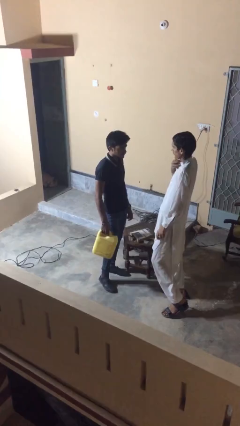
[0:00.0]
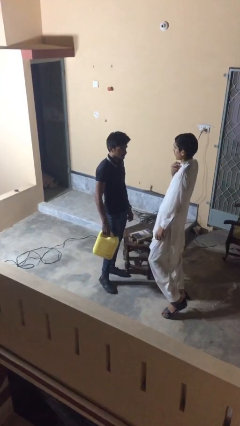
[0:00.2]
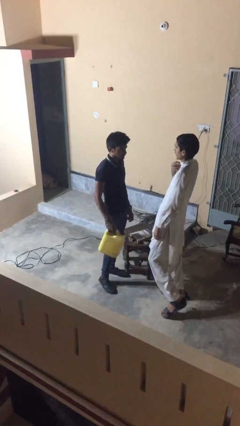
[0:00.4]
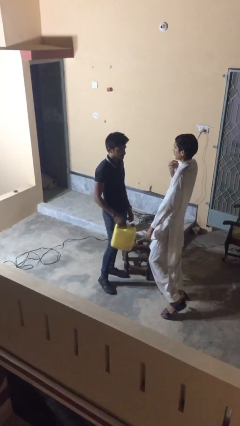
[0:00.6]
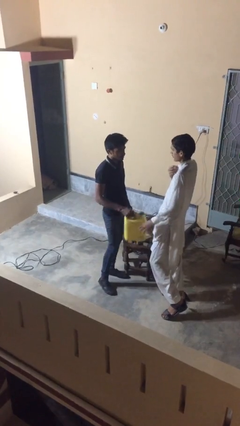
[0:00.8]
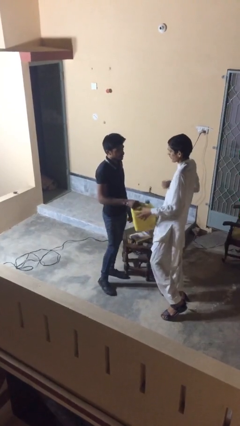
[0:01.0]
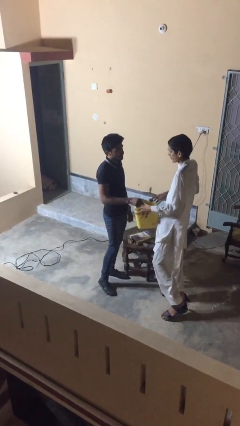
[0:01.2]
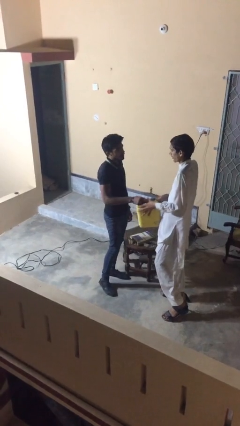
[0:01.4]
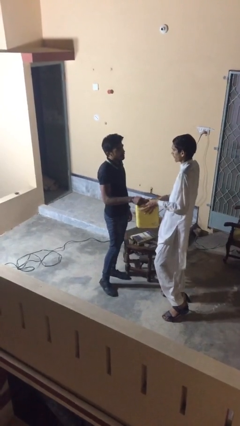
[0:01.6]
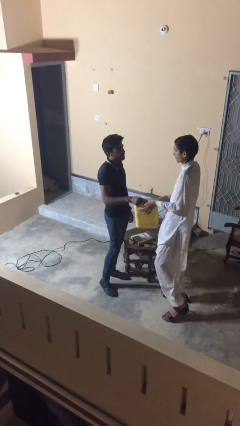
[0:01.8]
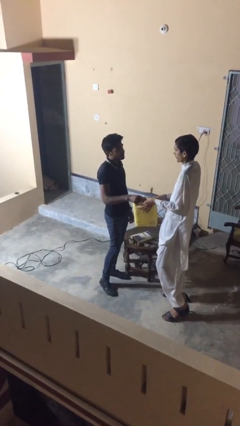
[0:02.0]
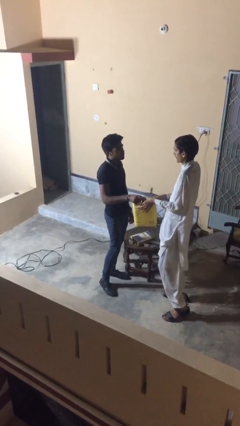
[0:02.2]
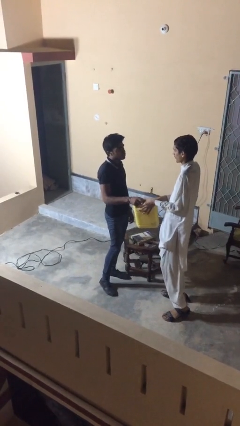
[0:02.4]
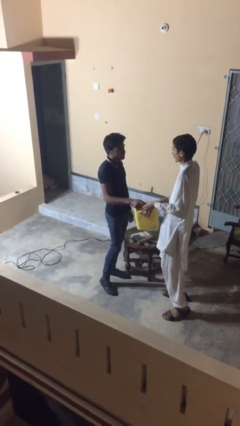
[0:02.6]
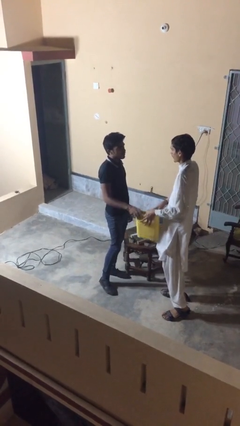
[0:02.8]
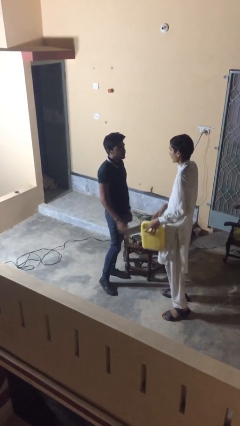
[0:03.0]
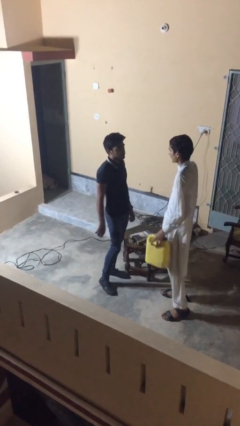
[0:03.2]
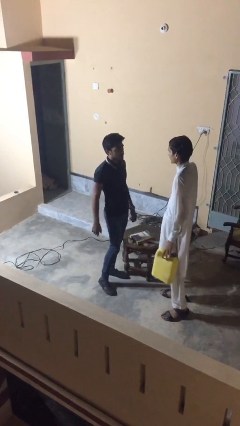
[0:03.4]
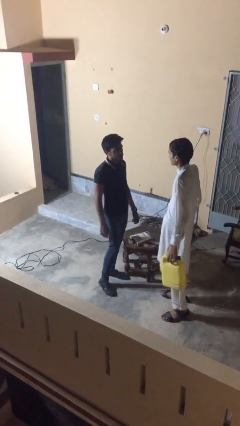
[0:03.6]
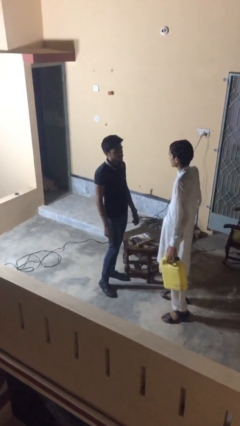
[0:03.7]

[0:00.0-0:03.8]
person transfers object to person

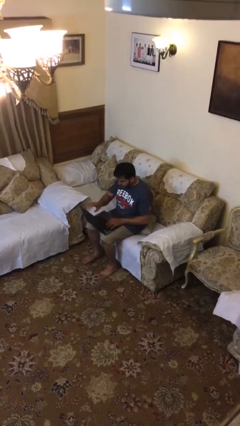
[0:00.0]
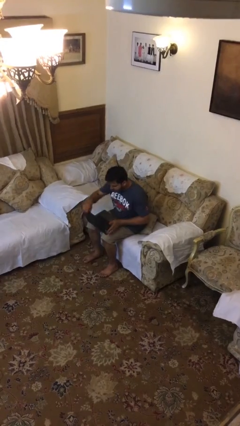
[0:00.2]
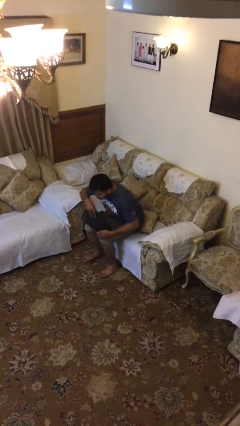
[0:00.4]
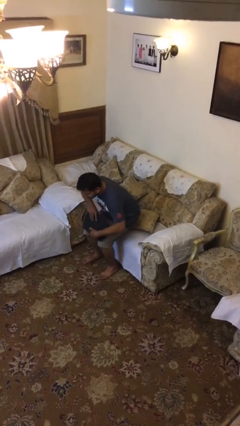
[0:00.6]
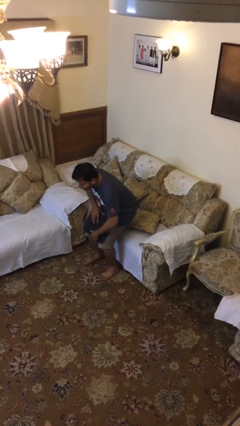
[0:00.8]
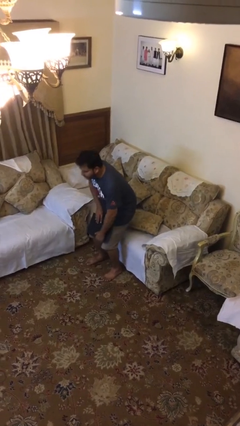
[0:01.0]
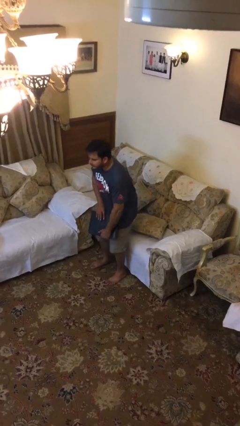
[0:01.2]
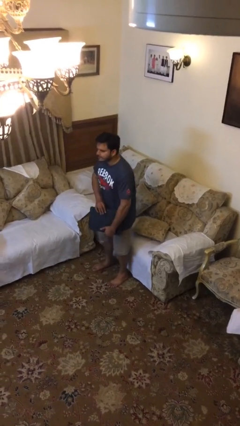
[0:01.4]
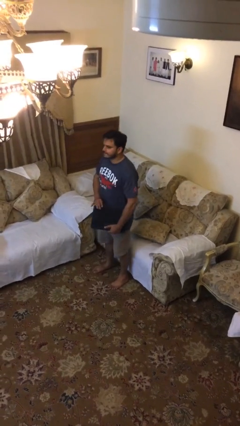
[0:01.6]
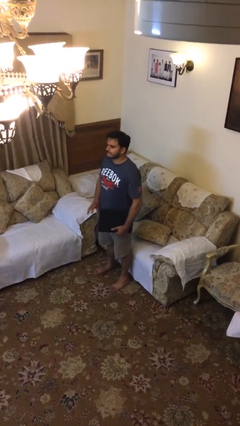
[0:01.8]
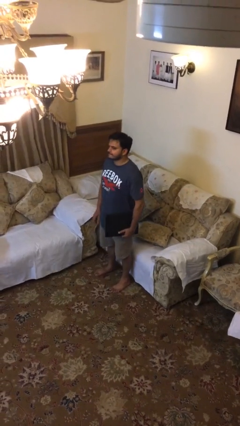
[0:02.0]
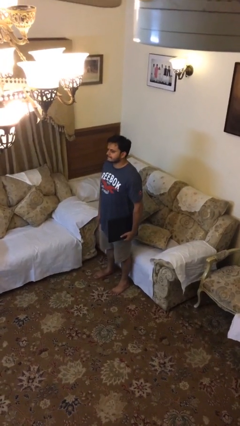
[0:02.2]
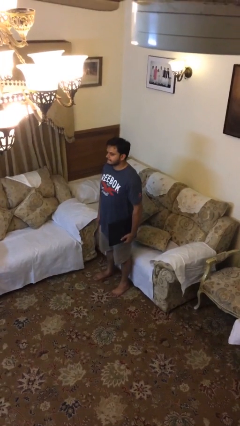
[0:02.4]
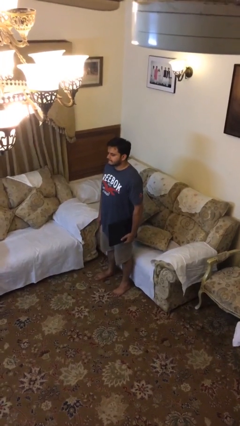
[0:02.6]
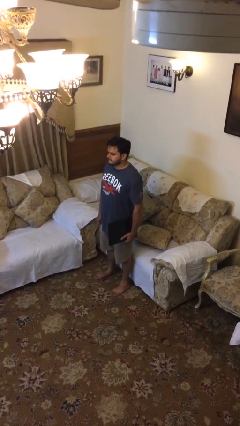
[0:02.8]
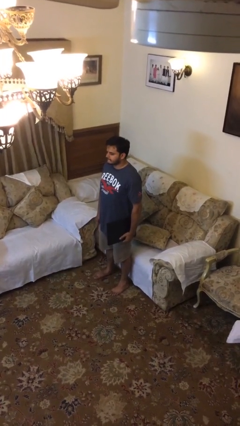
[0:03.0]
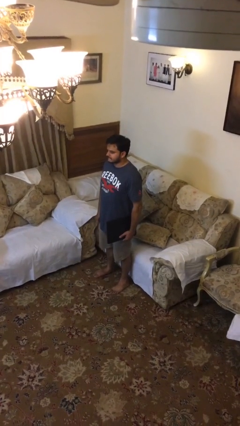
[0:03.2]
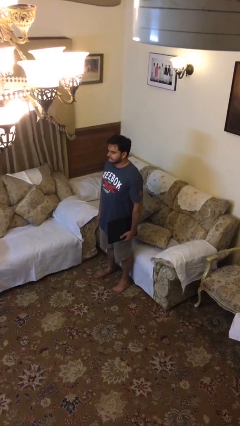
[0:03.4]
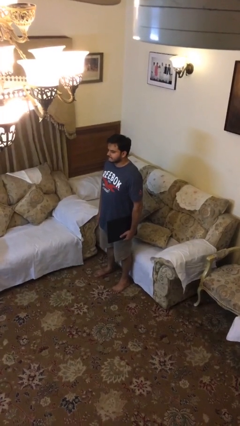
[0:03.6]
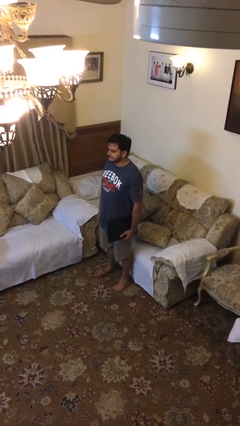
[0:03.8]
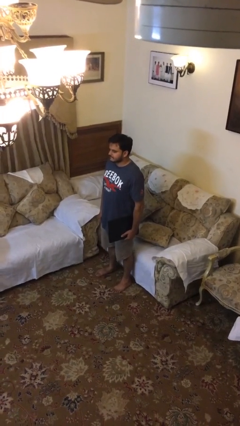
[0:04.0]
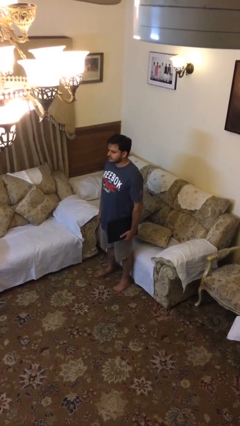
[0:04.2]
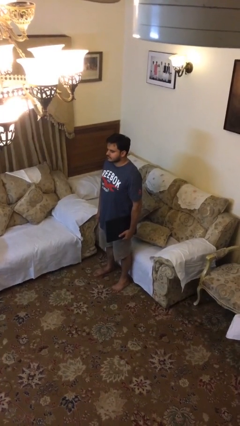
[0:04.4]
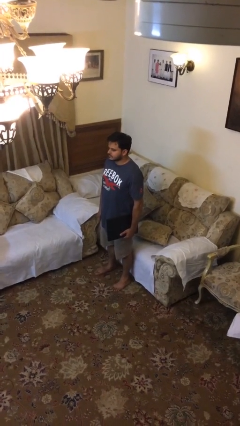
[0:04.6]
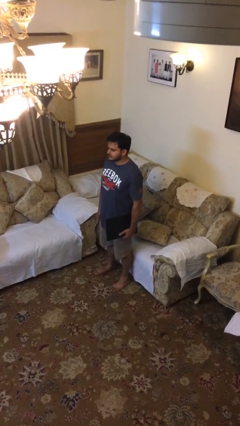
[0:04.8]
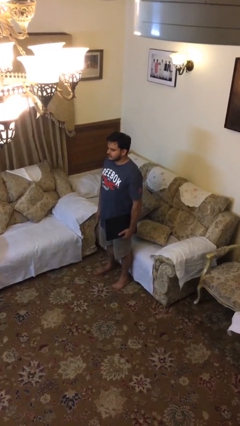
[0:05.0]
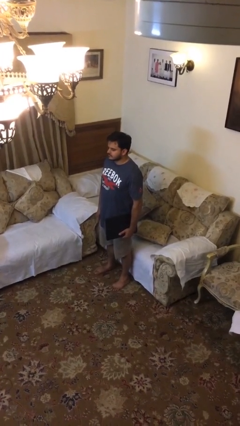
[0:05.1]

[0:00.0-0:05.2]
person stands up

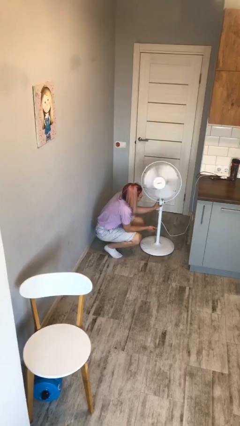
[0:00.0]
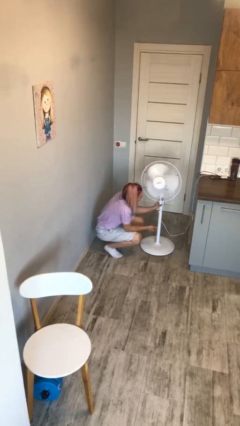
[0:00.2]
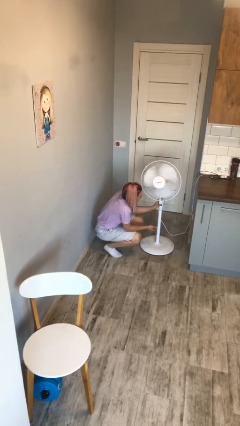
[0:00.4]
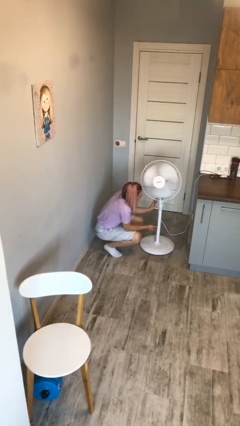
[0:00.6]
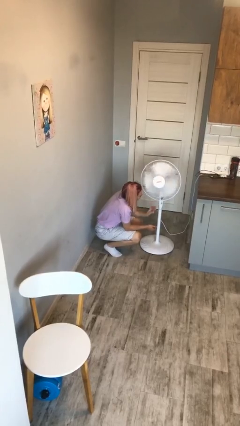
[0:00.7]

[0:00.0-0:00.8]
person turns on fan

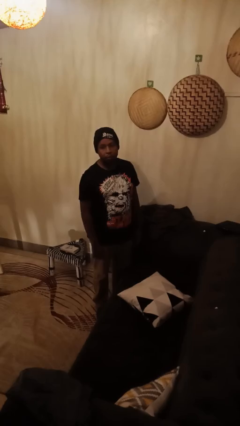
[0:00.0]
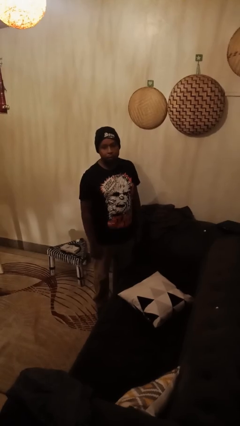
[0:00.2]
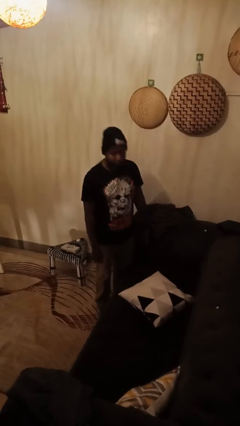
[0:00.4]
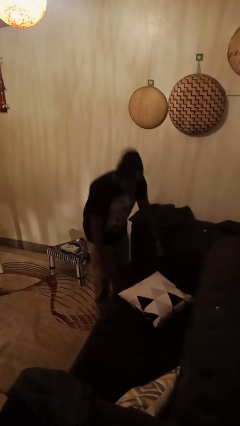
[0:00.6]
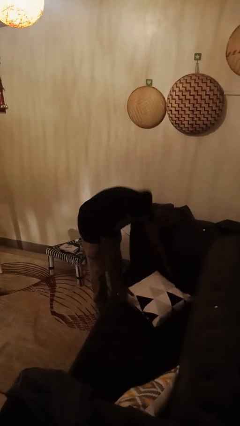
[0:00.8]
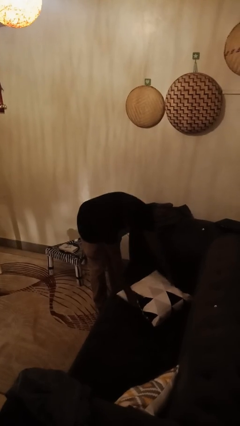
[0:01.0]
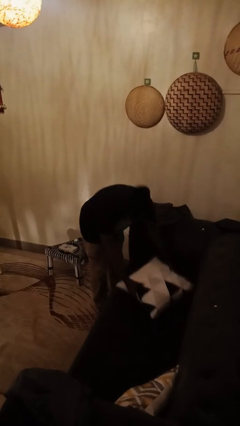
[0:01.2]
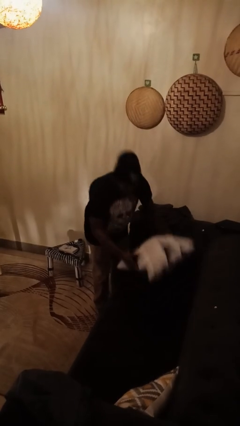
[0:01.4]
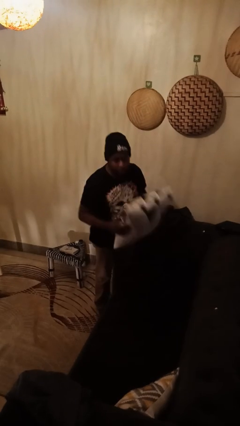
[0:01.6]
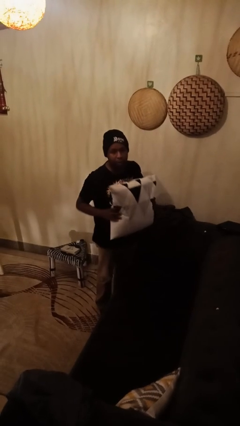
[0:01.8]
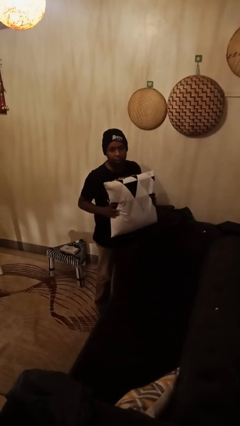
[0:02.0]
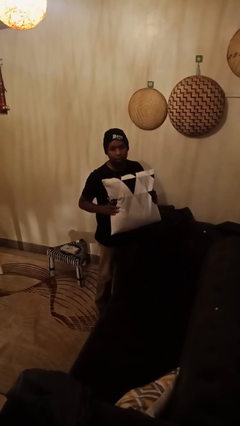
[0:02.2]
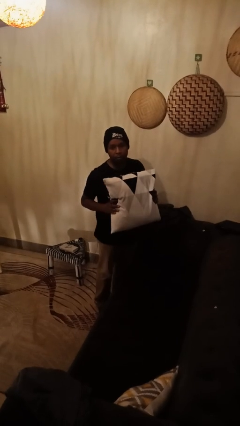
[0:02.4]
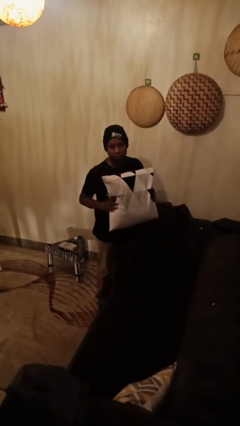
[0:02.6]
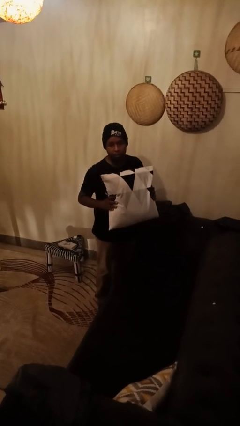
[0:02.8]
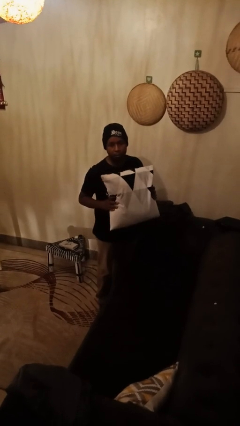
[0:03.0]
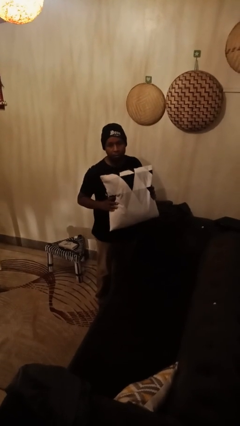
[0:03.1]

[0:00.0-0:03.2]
person picks up object from couch

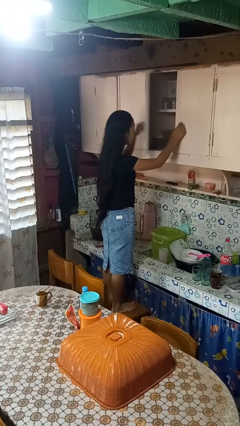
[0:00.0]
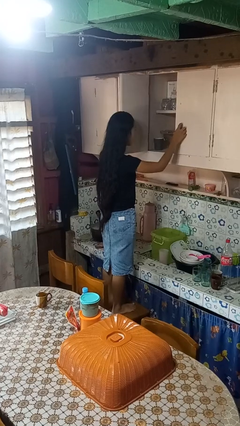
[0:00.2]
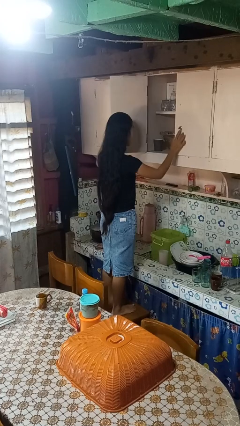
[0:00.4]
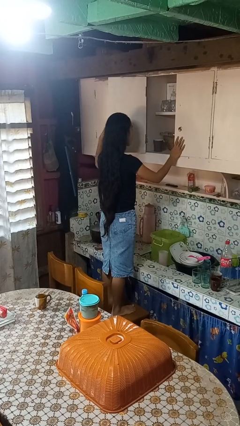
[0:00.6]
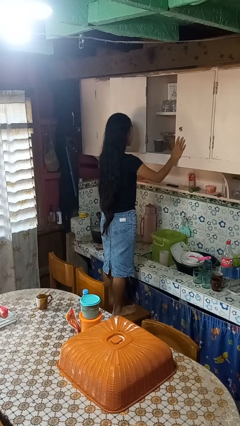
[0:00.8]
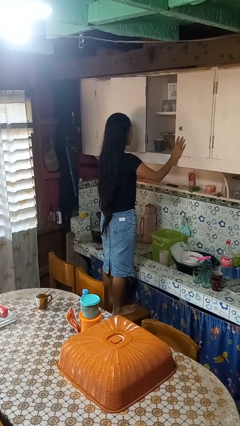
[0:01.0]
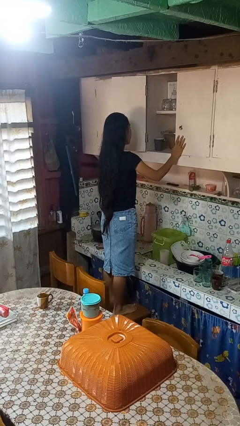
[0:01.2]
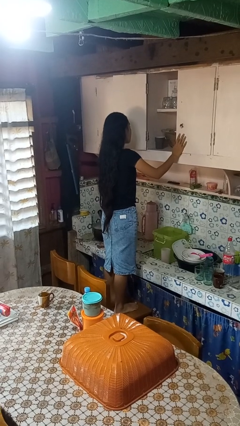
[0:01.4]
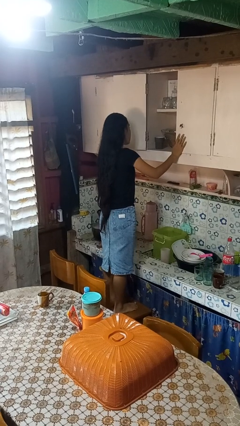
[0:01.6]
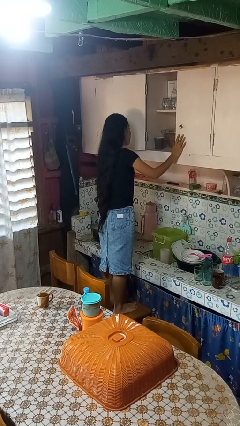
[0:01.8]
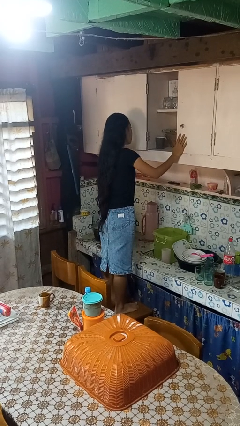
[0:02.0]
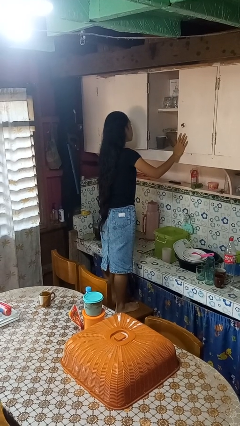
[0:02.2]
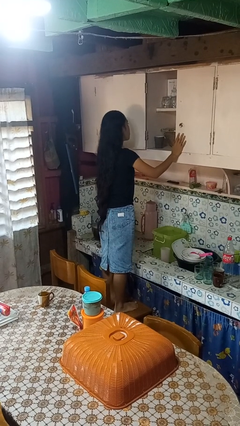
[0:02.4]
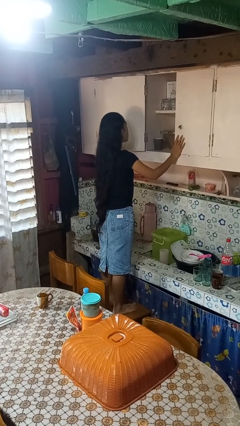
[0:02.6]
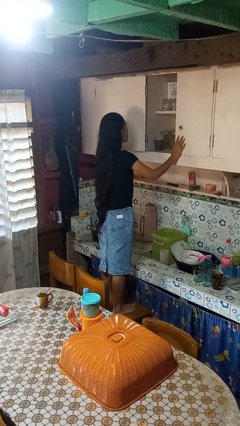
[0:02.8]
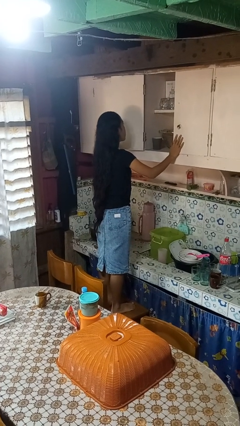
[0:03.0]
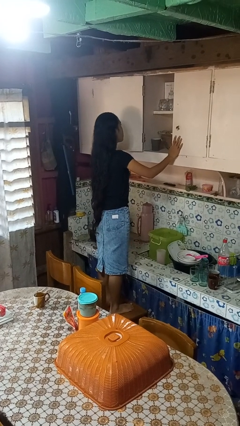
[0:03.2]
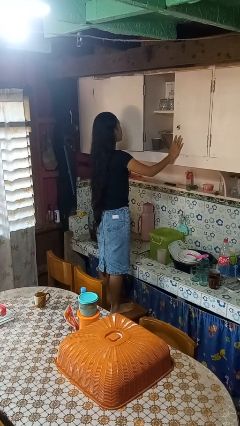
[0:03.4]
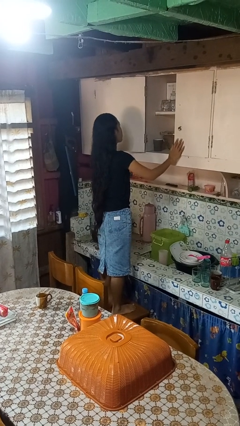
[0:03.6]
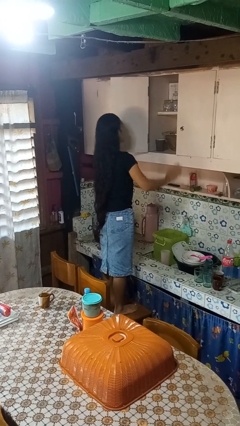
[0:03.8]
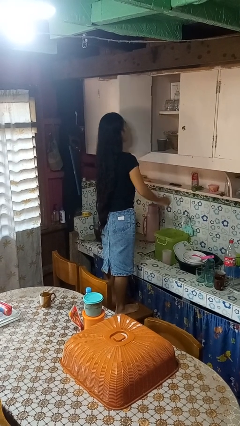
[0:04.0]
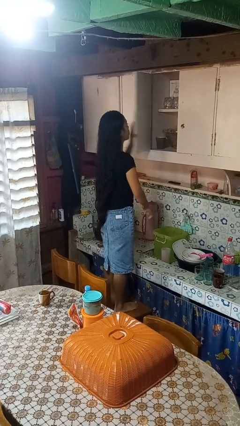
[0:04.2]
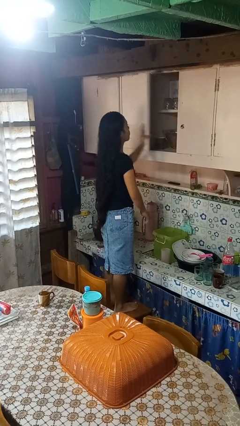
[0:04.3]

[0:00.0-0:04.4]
person opens cabinet
